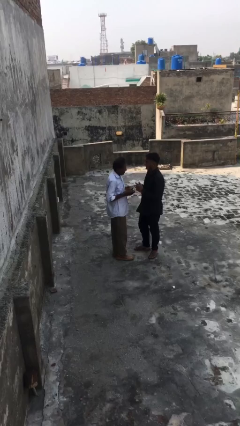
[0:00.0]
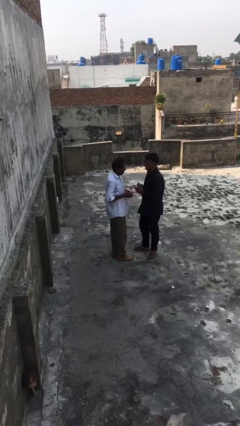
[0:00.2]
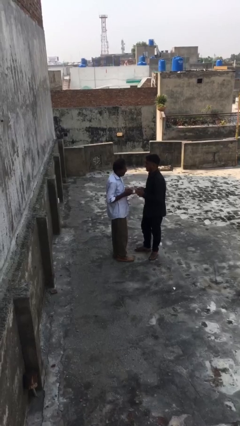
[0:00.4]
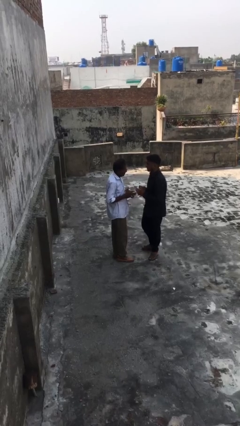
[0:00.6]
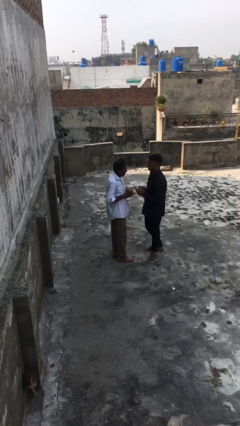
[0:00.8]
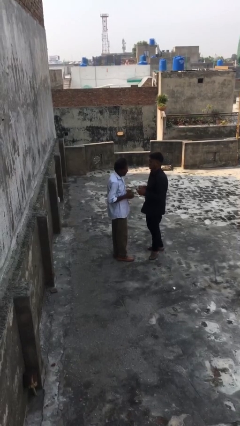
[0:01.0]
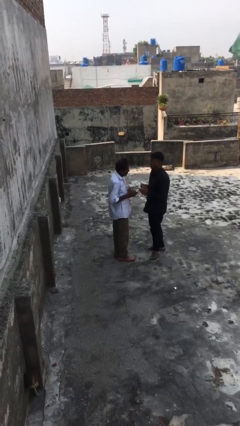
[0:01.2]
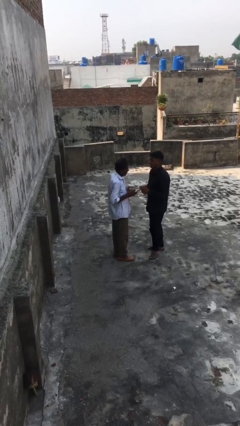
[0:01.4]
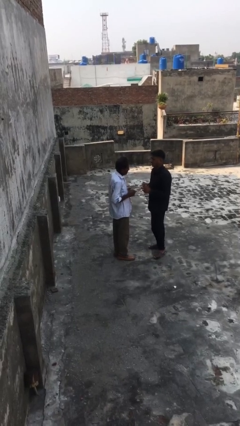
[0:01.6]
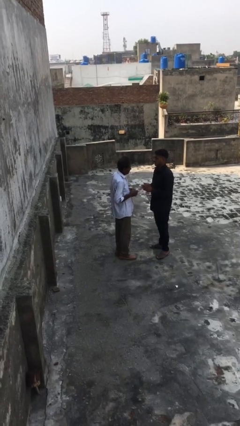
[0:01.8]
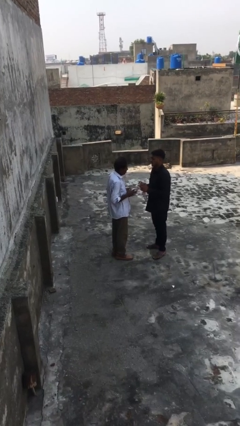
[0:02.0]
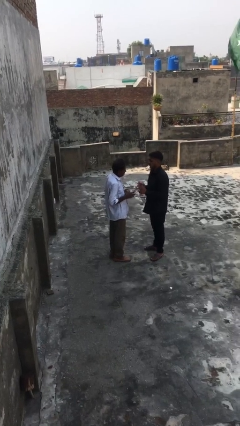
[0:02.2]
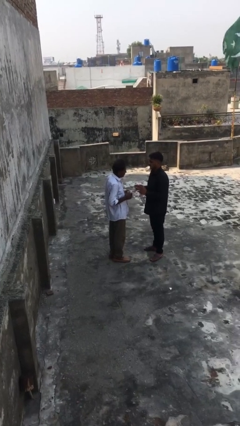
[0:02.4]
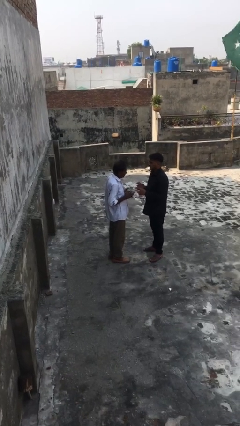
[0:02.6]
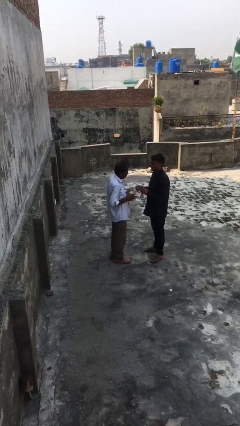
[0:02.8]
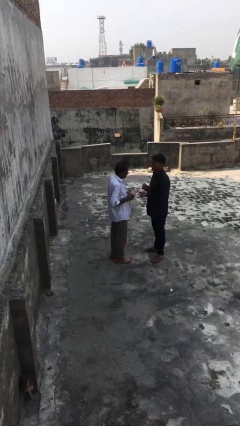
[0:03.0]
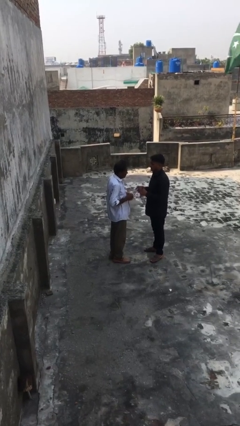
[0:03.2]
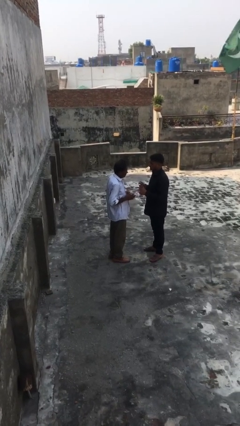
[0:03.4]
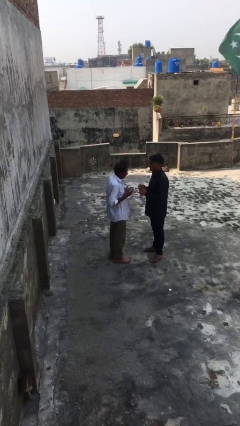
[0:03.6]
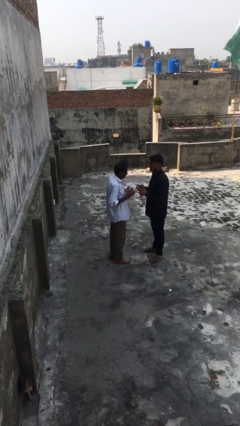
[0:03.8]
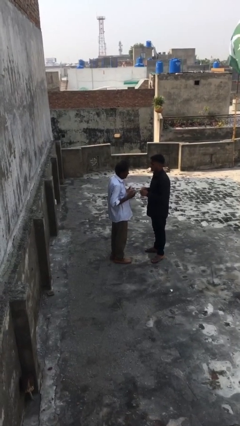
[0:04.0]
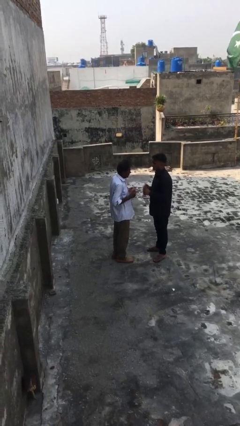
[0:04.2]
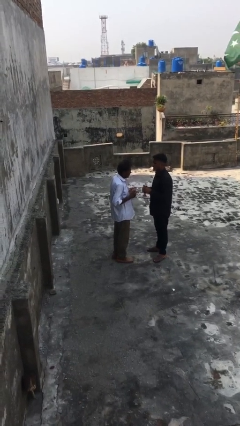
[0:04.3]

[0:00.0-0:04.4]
person talks to person

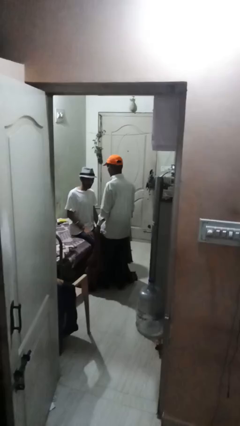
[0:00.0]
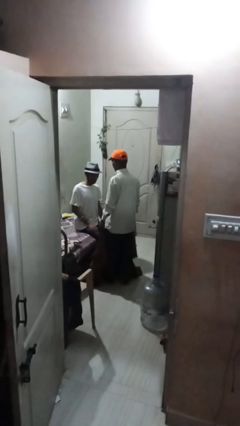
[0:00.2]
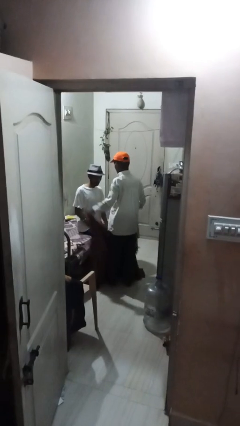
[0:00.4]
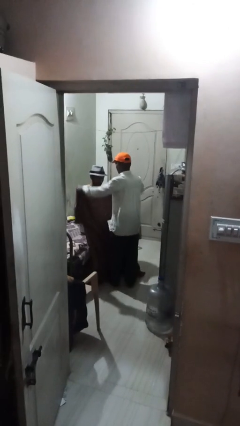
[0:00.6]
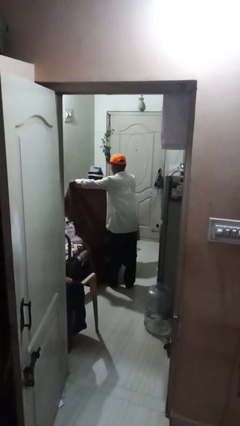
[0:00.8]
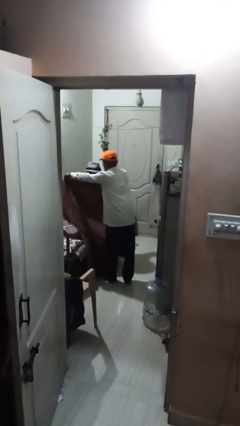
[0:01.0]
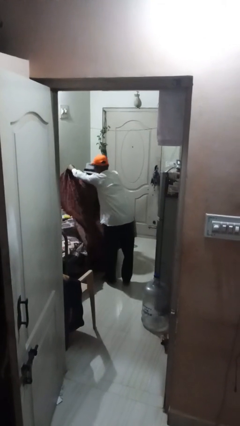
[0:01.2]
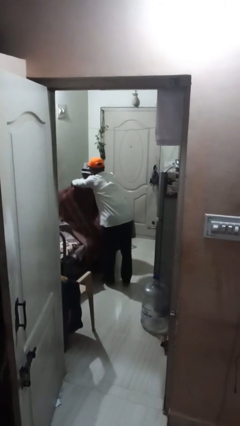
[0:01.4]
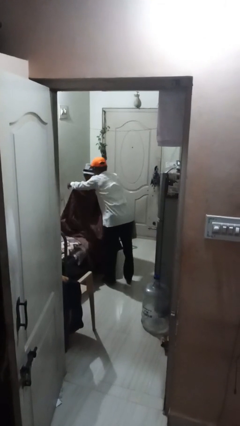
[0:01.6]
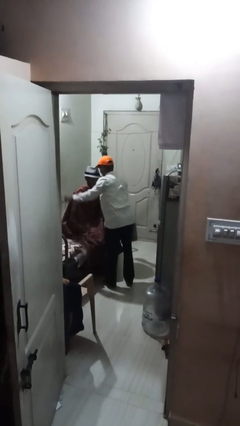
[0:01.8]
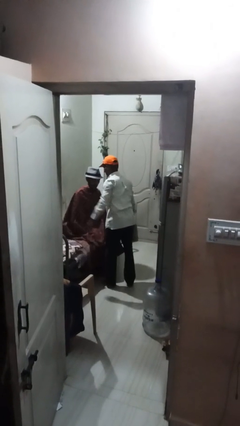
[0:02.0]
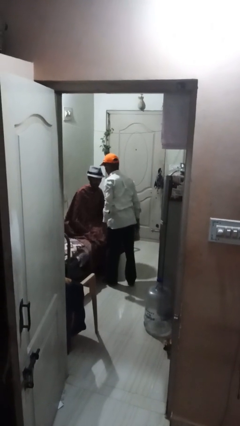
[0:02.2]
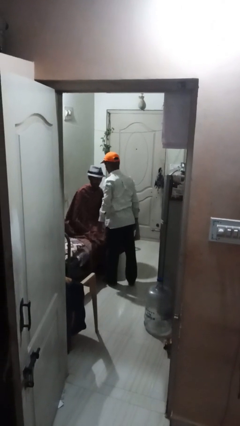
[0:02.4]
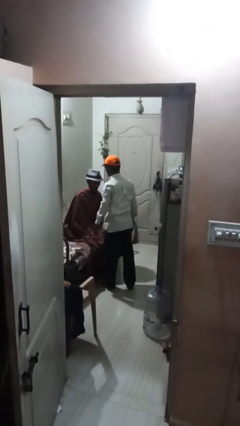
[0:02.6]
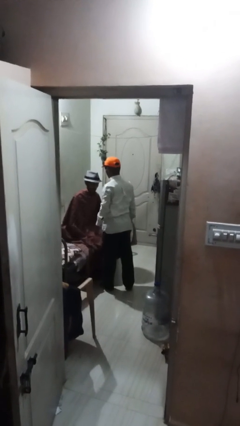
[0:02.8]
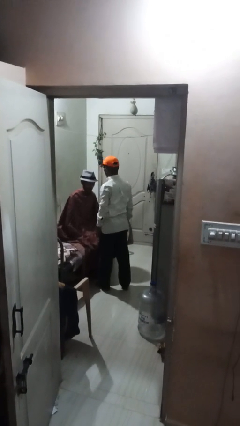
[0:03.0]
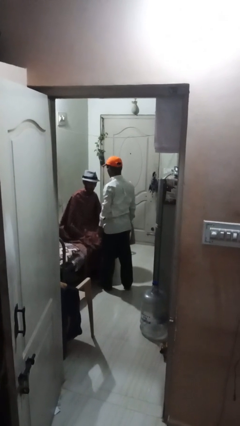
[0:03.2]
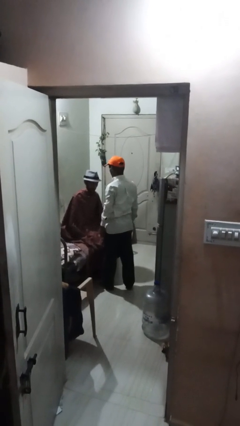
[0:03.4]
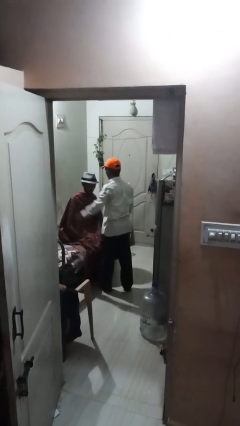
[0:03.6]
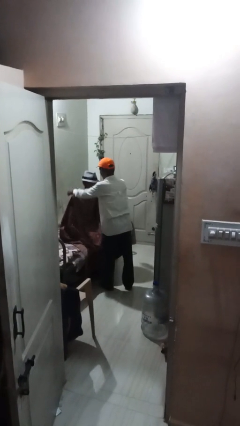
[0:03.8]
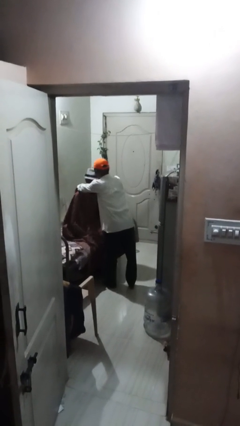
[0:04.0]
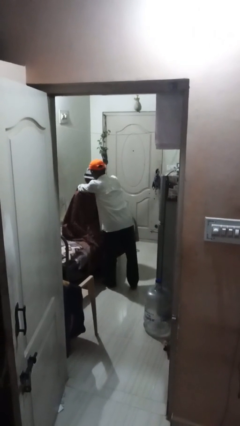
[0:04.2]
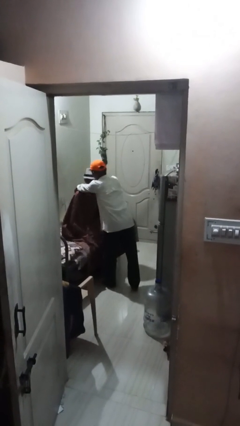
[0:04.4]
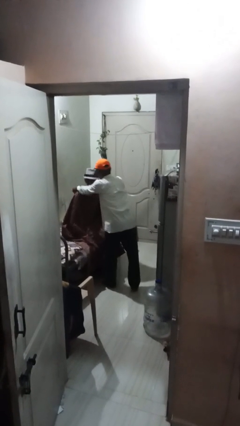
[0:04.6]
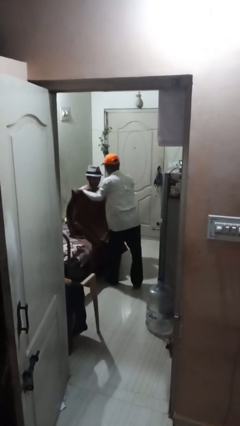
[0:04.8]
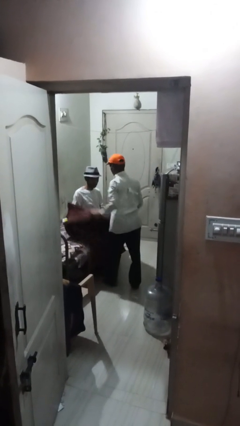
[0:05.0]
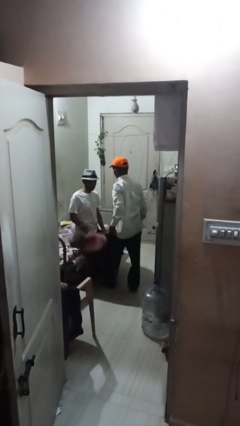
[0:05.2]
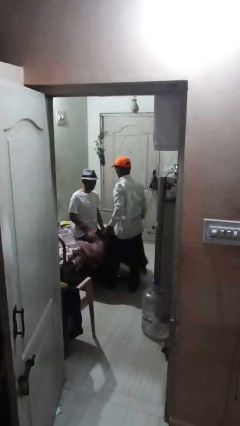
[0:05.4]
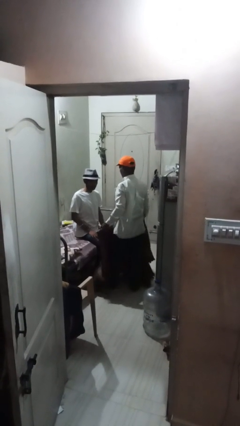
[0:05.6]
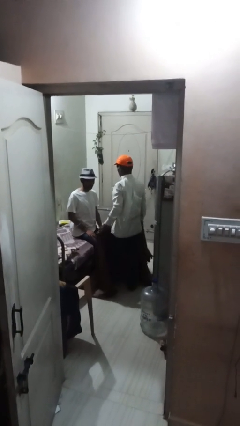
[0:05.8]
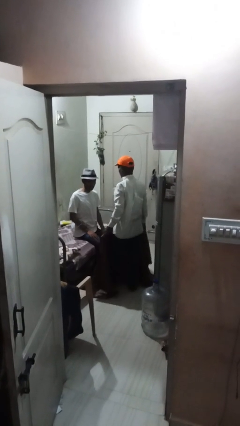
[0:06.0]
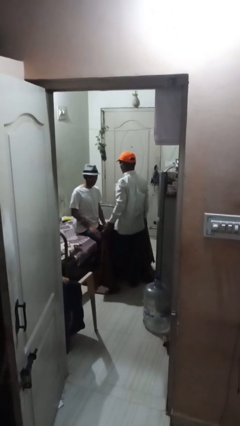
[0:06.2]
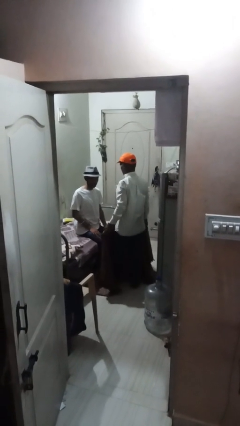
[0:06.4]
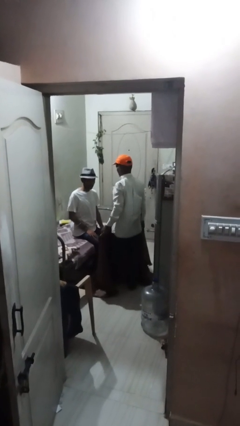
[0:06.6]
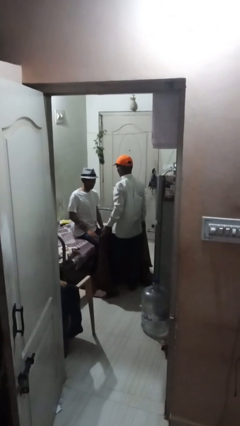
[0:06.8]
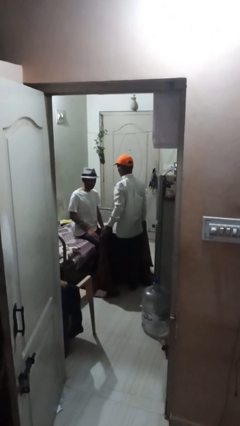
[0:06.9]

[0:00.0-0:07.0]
person covers friend with blanket

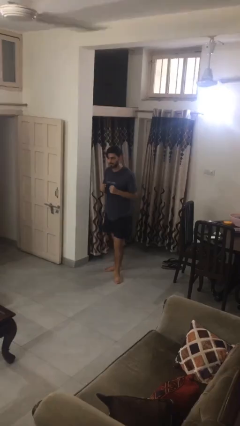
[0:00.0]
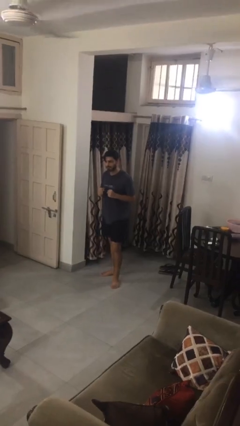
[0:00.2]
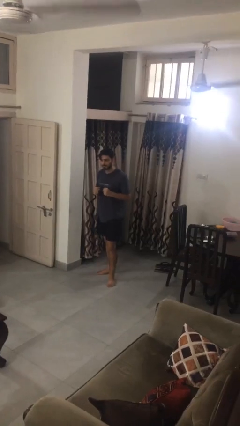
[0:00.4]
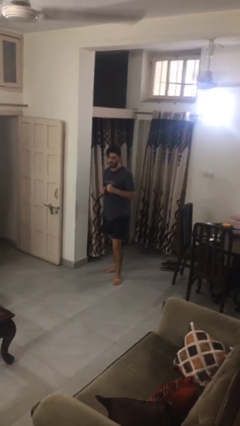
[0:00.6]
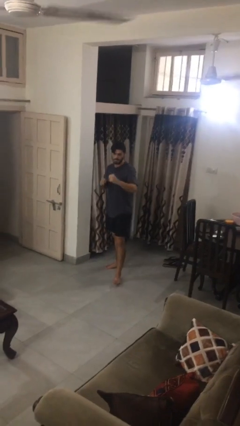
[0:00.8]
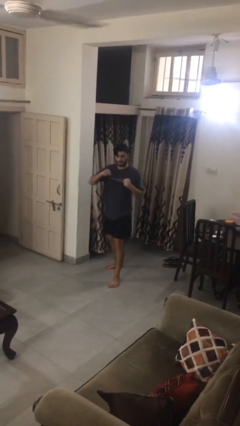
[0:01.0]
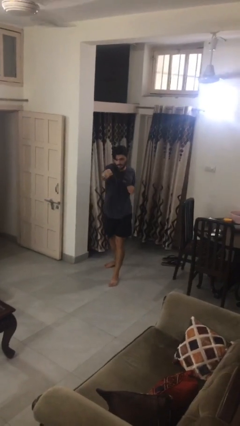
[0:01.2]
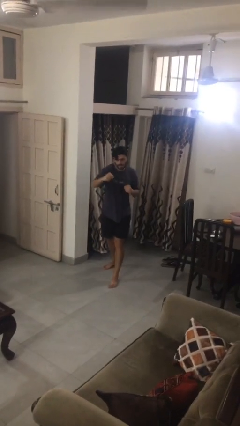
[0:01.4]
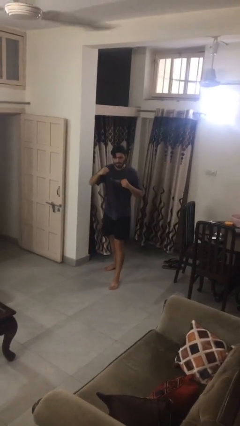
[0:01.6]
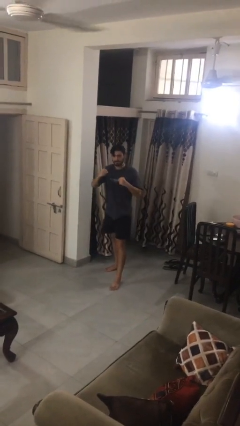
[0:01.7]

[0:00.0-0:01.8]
person karate chop

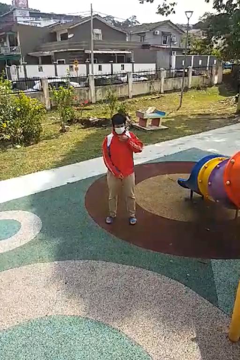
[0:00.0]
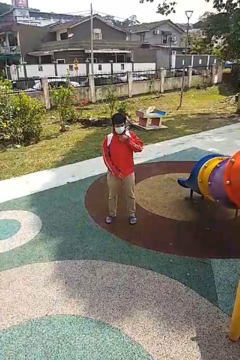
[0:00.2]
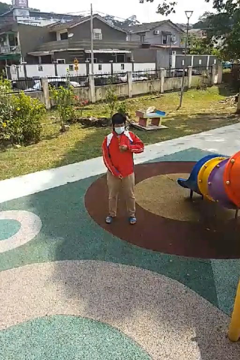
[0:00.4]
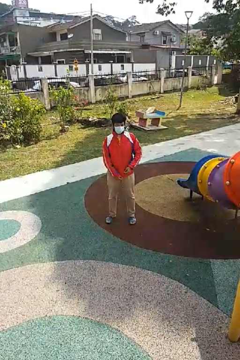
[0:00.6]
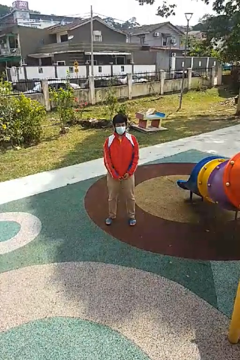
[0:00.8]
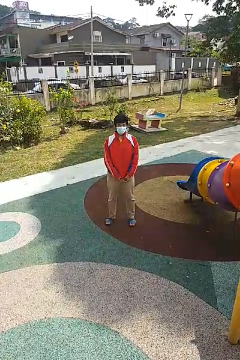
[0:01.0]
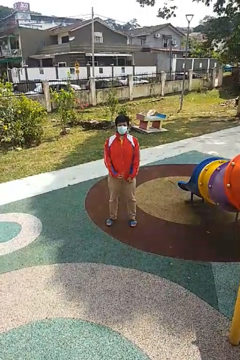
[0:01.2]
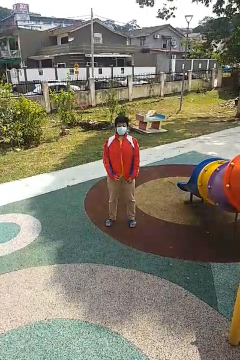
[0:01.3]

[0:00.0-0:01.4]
person unzips jacket

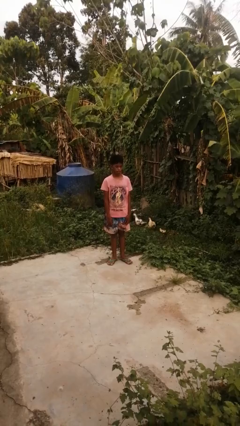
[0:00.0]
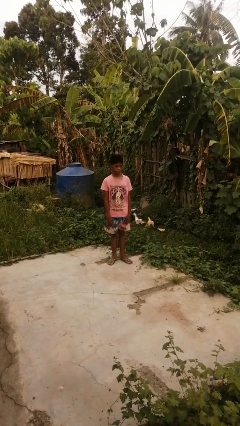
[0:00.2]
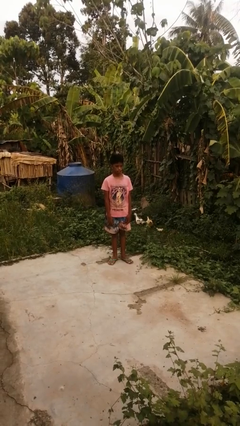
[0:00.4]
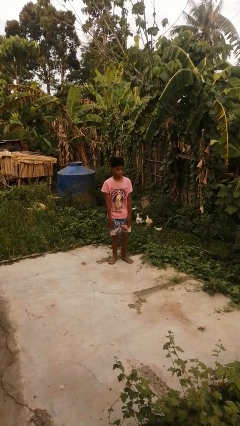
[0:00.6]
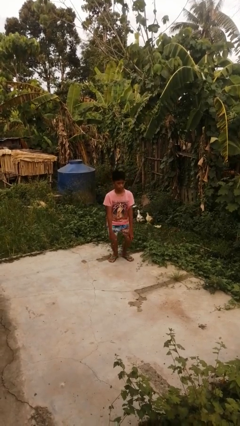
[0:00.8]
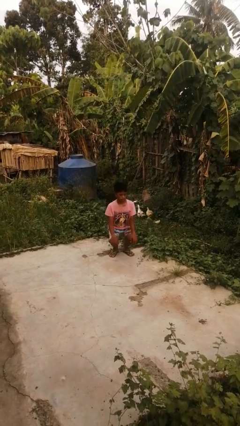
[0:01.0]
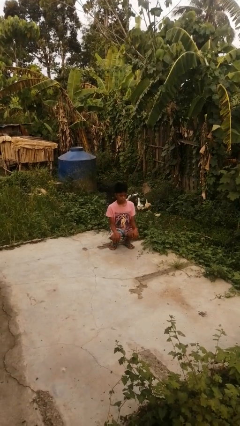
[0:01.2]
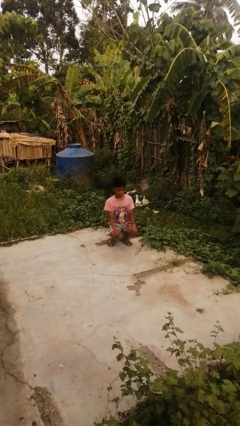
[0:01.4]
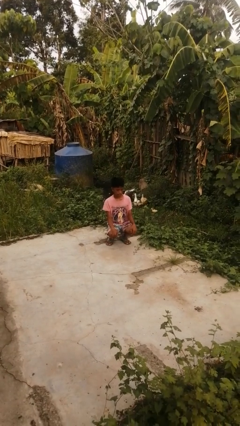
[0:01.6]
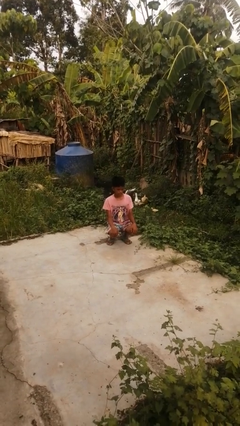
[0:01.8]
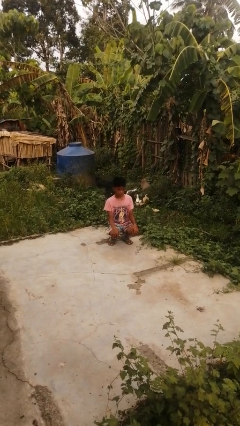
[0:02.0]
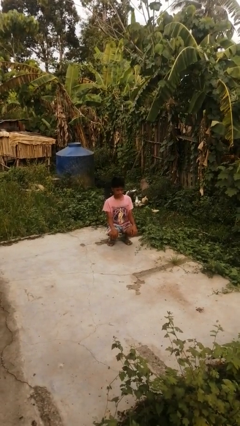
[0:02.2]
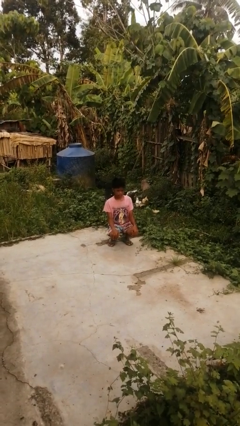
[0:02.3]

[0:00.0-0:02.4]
person squats

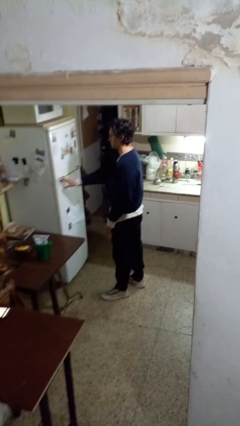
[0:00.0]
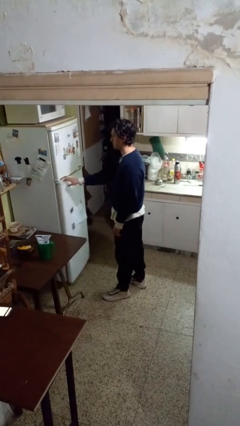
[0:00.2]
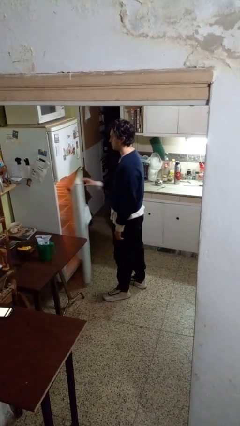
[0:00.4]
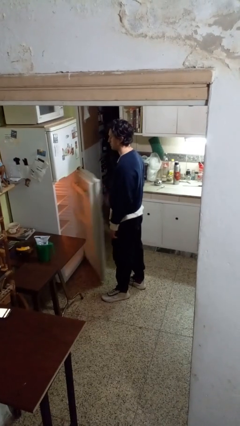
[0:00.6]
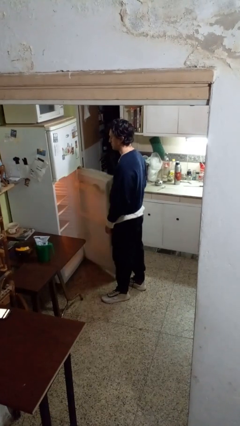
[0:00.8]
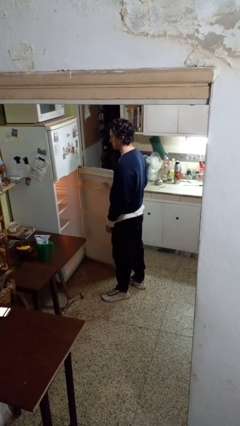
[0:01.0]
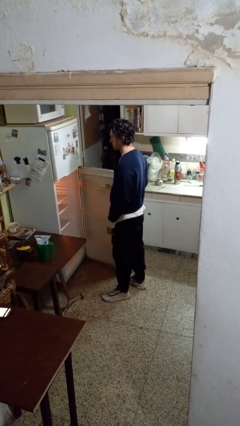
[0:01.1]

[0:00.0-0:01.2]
person opens refrigerator
